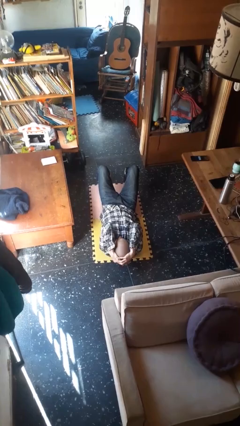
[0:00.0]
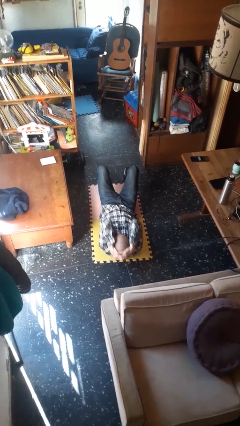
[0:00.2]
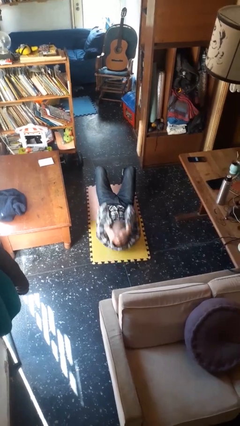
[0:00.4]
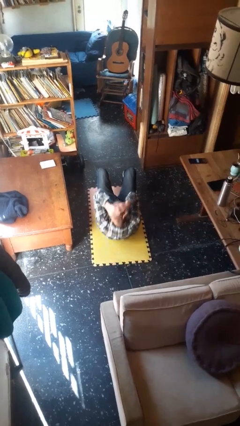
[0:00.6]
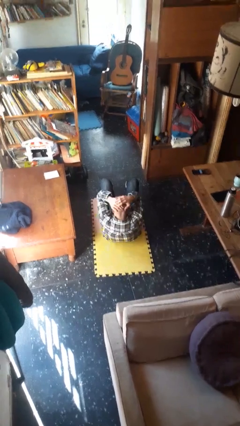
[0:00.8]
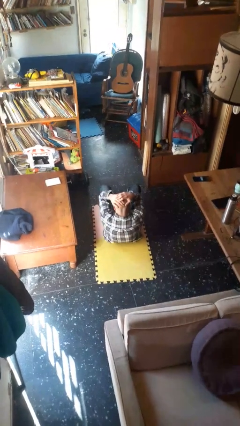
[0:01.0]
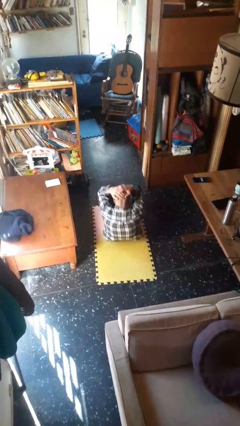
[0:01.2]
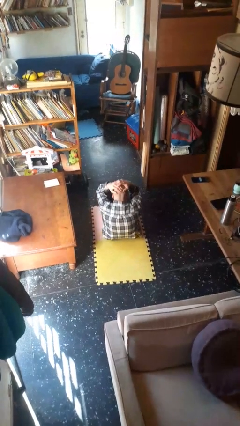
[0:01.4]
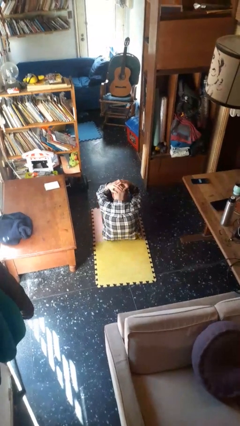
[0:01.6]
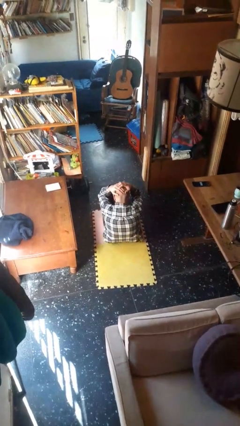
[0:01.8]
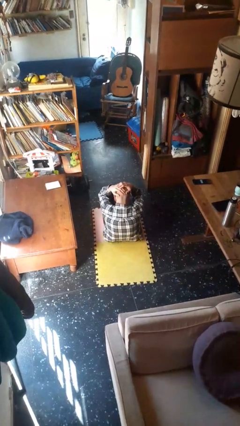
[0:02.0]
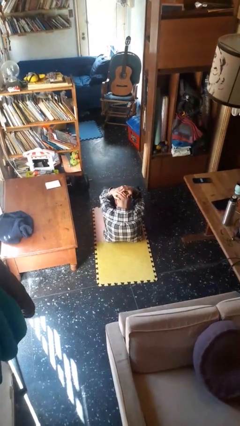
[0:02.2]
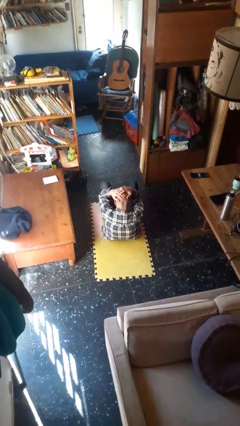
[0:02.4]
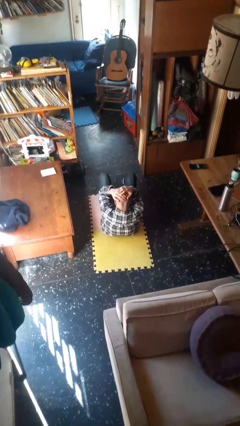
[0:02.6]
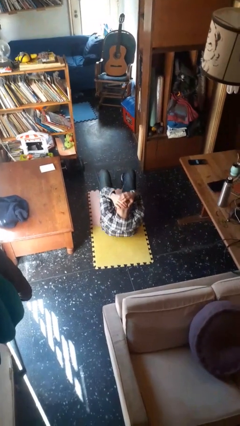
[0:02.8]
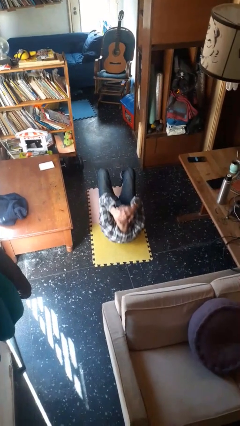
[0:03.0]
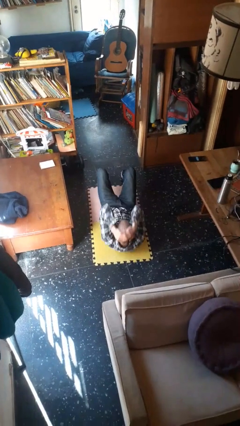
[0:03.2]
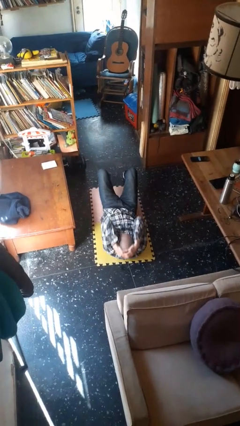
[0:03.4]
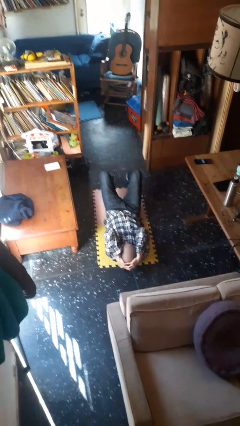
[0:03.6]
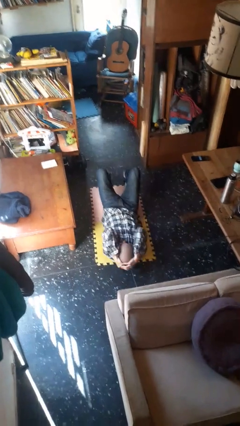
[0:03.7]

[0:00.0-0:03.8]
person exercises with situp

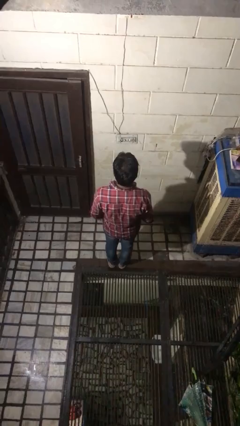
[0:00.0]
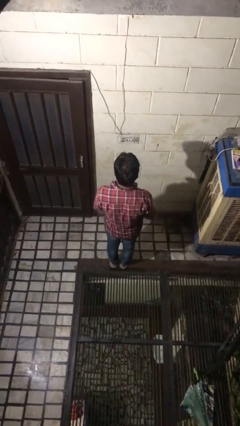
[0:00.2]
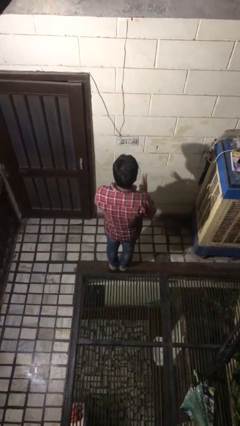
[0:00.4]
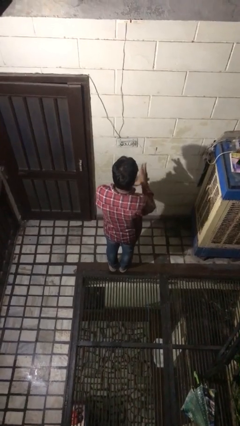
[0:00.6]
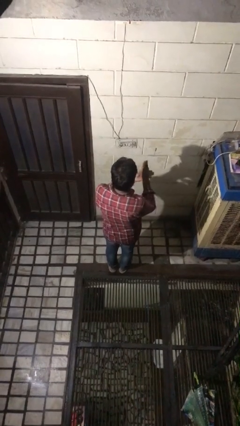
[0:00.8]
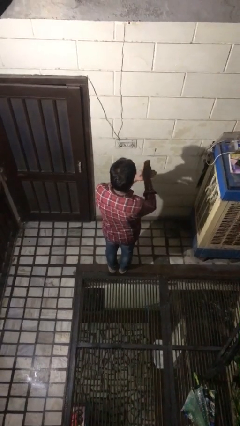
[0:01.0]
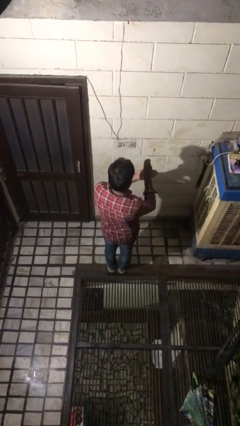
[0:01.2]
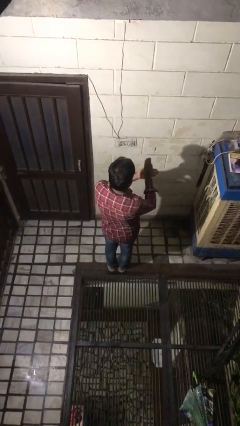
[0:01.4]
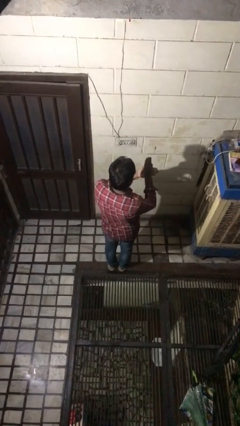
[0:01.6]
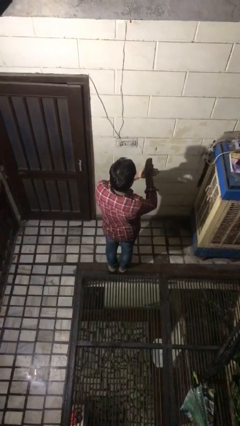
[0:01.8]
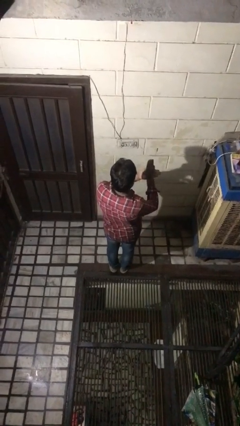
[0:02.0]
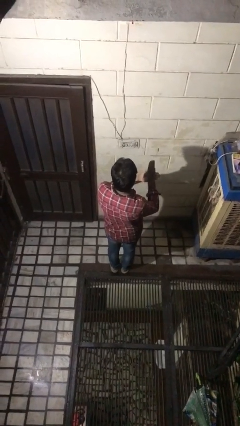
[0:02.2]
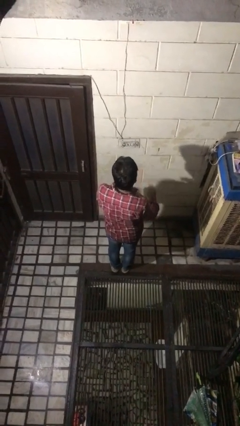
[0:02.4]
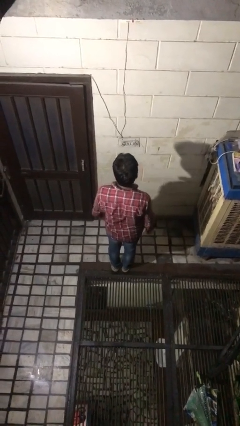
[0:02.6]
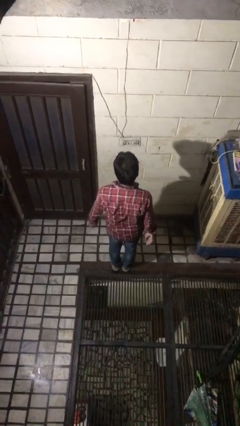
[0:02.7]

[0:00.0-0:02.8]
person gestures number three

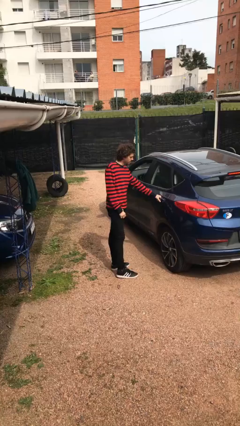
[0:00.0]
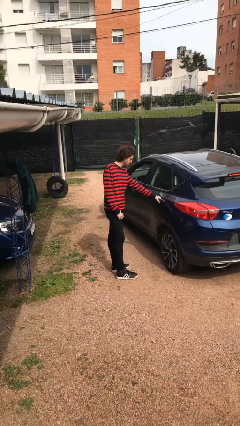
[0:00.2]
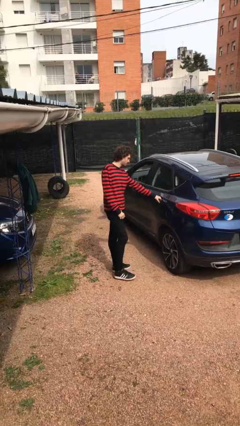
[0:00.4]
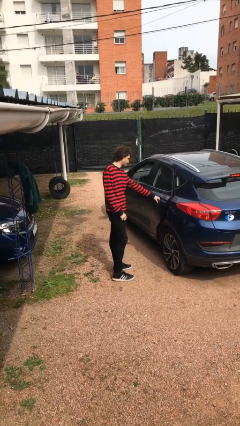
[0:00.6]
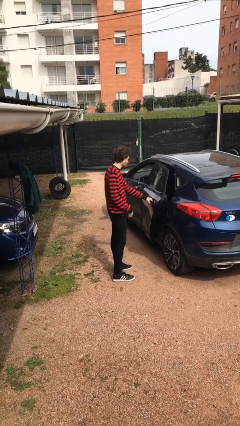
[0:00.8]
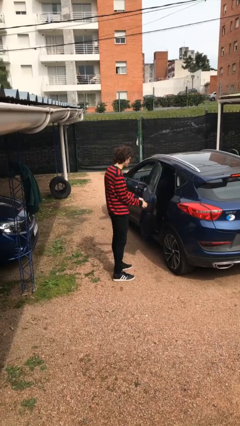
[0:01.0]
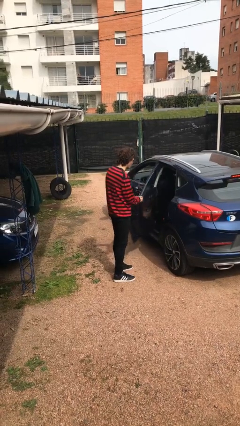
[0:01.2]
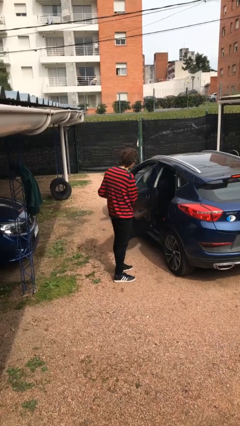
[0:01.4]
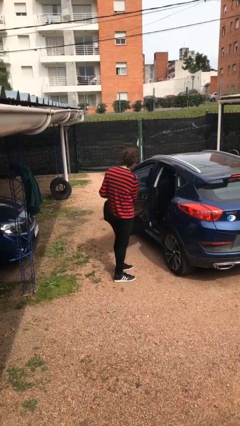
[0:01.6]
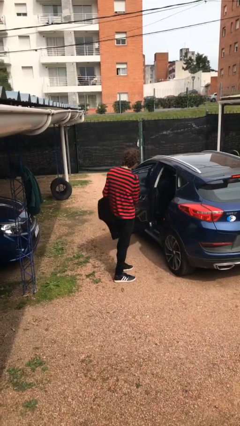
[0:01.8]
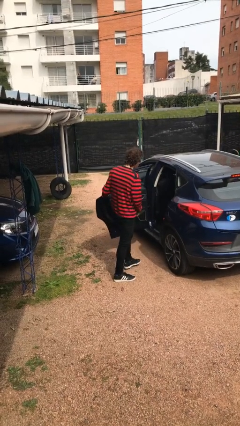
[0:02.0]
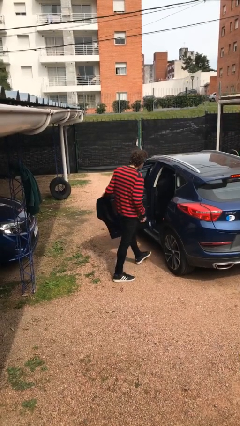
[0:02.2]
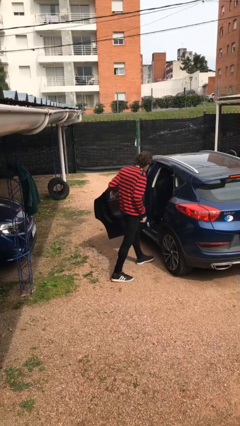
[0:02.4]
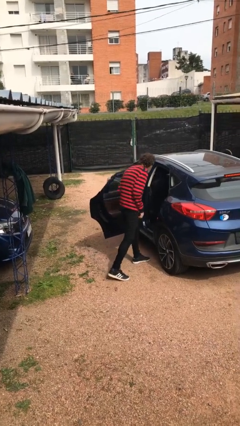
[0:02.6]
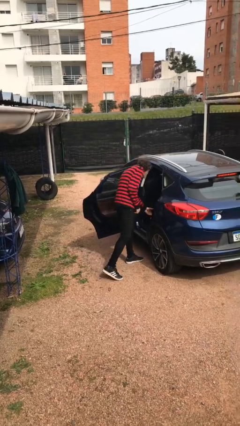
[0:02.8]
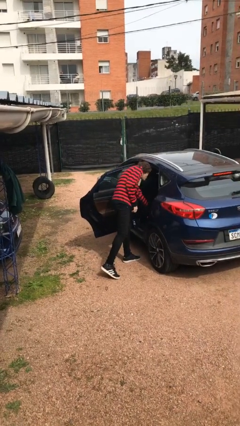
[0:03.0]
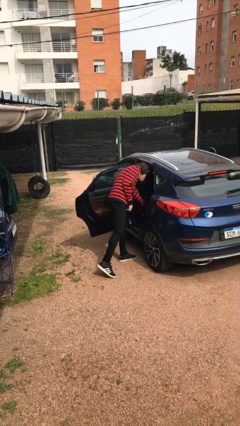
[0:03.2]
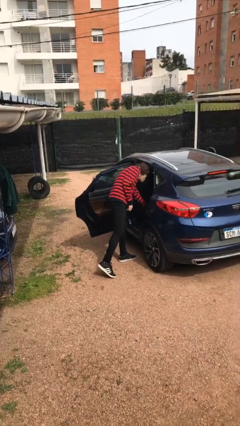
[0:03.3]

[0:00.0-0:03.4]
person opens car door

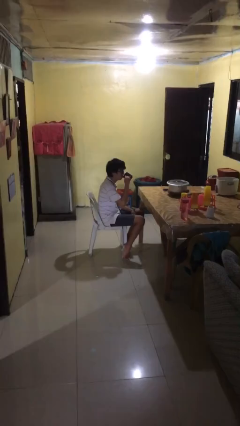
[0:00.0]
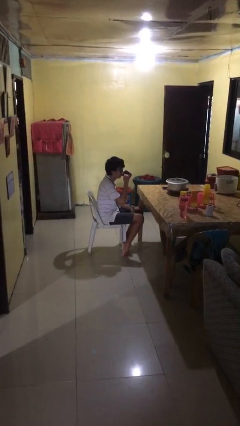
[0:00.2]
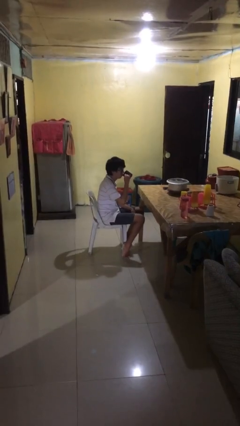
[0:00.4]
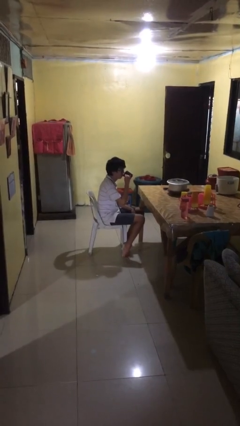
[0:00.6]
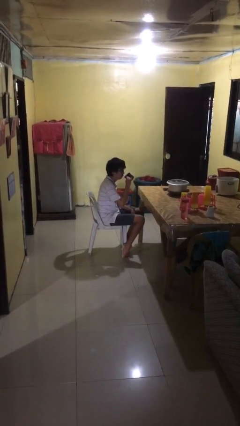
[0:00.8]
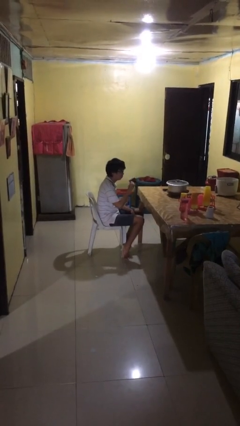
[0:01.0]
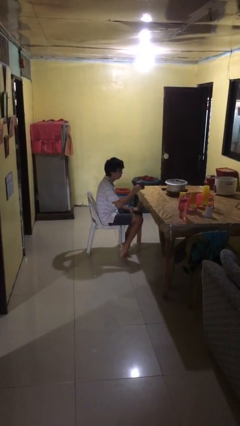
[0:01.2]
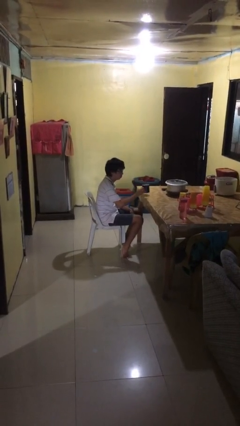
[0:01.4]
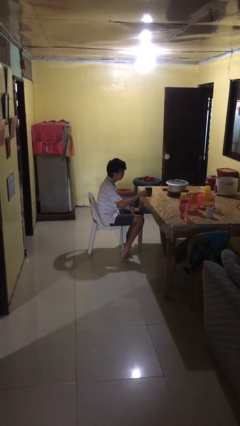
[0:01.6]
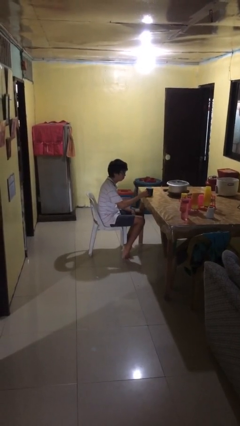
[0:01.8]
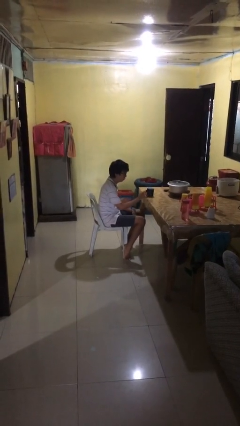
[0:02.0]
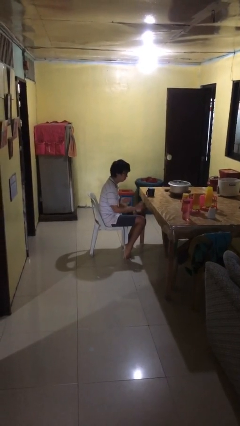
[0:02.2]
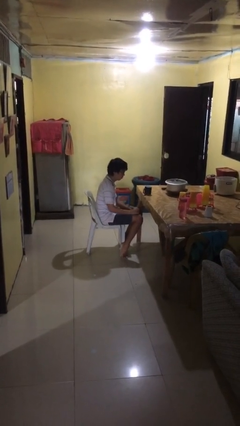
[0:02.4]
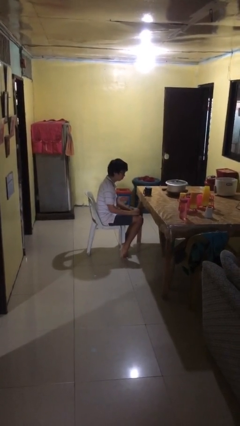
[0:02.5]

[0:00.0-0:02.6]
person puts down object on table

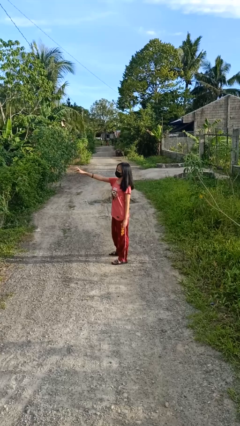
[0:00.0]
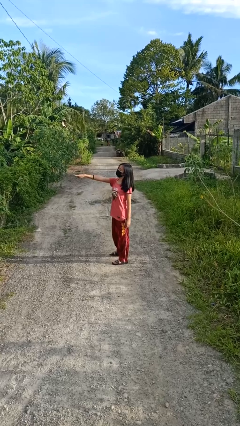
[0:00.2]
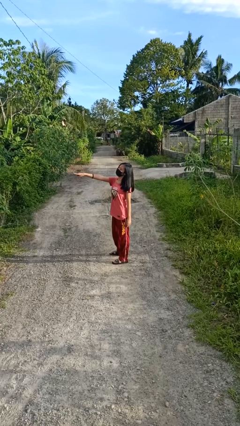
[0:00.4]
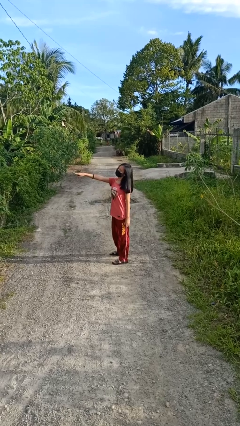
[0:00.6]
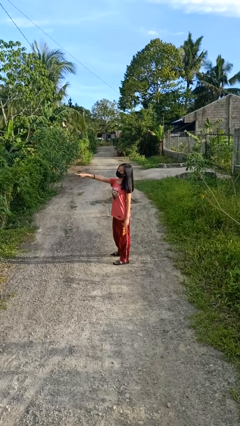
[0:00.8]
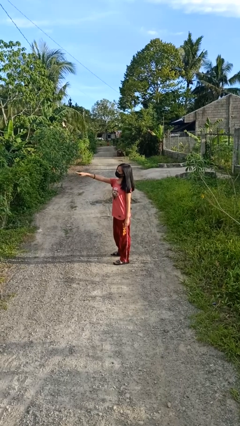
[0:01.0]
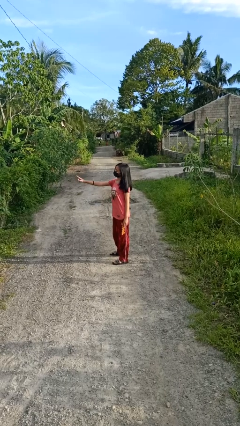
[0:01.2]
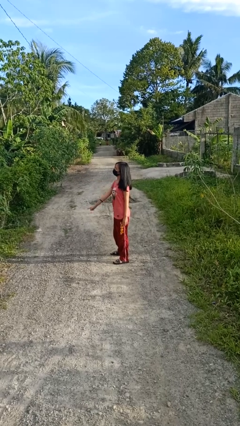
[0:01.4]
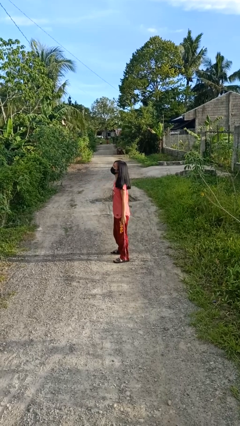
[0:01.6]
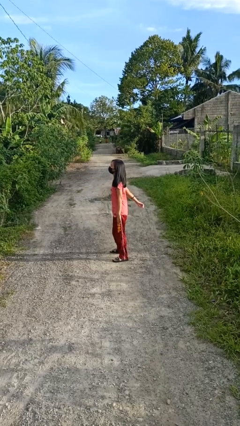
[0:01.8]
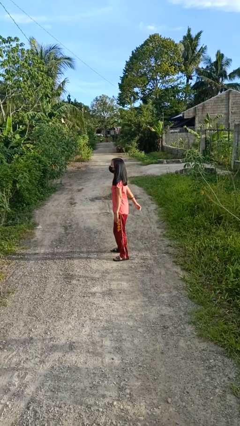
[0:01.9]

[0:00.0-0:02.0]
person points at person

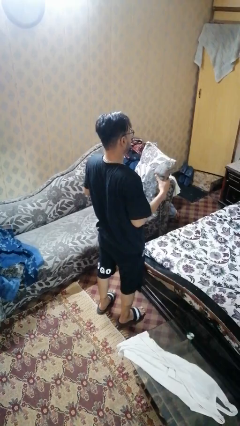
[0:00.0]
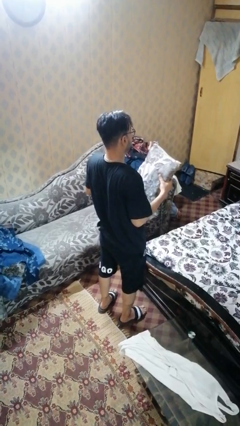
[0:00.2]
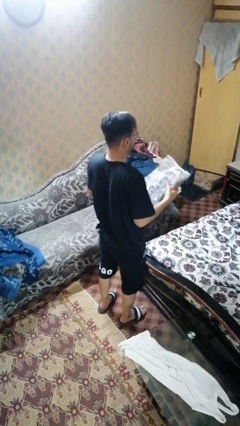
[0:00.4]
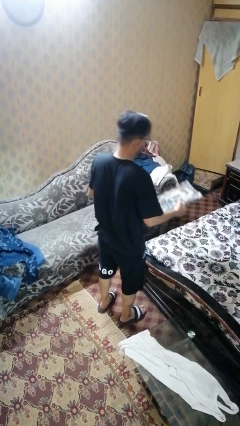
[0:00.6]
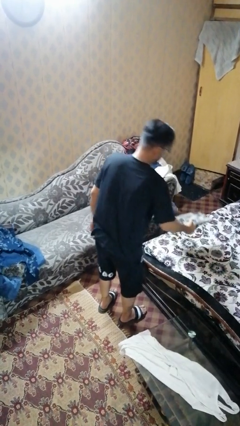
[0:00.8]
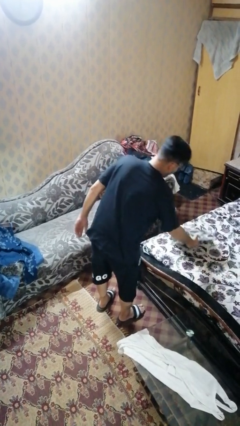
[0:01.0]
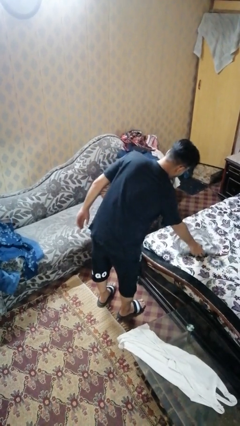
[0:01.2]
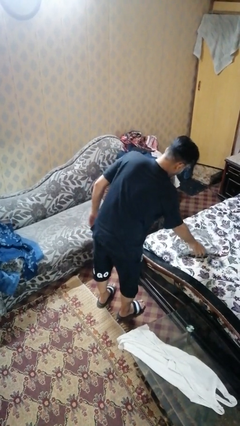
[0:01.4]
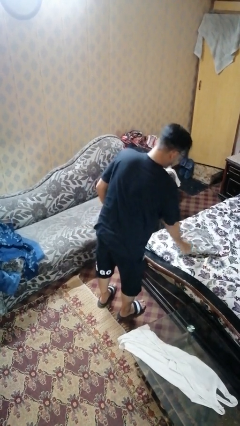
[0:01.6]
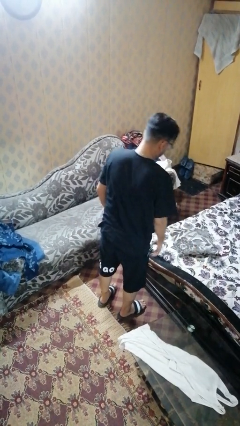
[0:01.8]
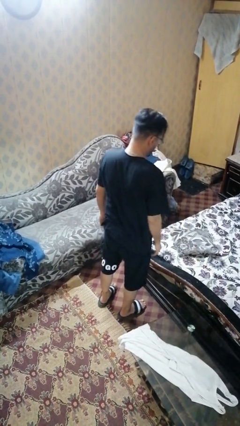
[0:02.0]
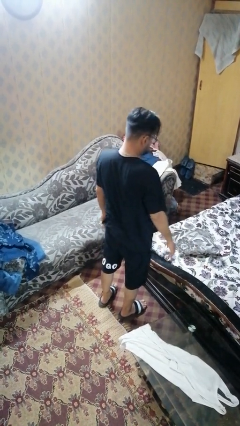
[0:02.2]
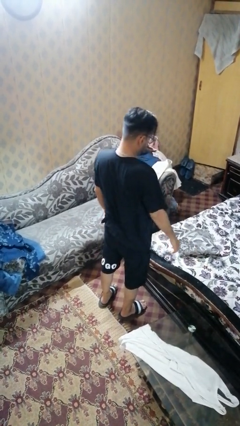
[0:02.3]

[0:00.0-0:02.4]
person puts down object on bed
